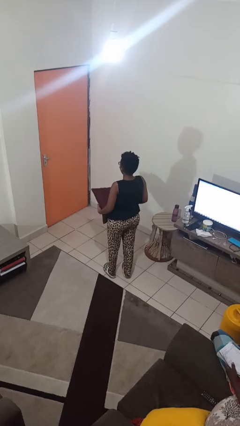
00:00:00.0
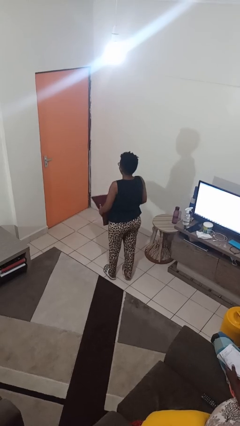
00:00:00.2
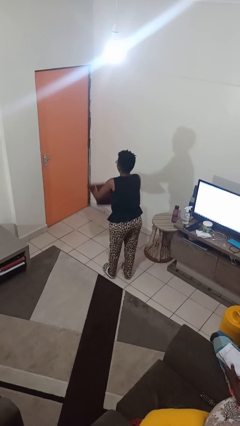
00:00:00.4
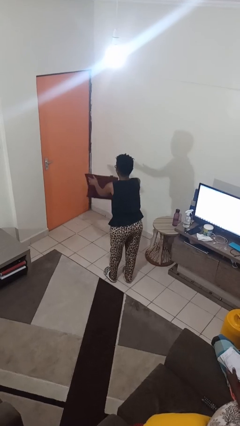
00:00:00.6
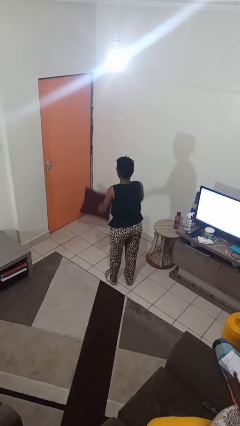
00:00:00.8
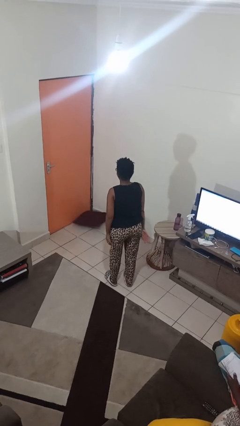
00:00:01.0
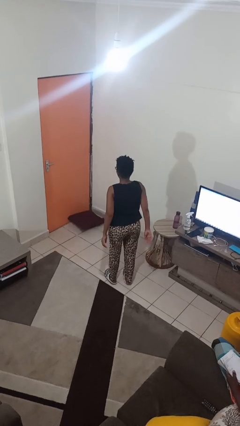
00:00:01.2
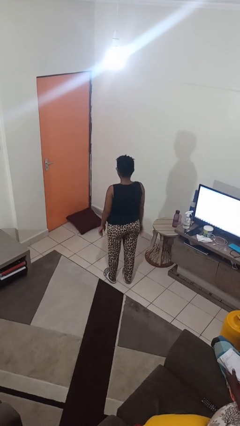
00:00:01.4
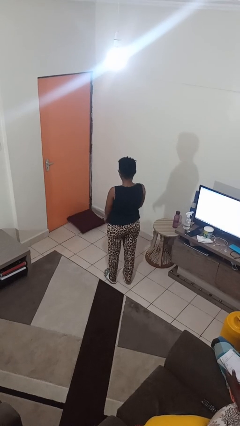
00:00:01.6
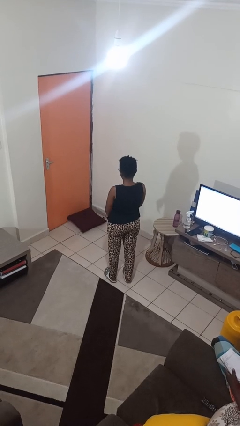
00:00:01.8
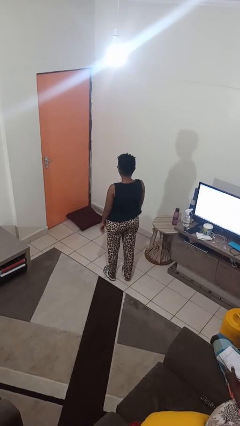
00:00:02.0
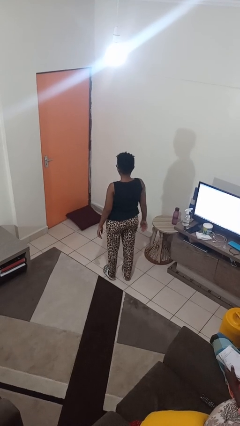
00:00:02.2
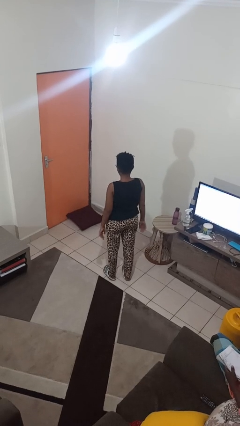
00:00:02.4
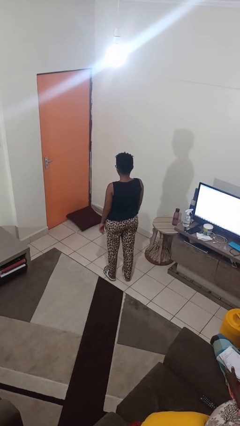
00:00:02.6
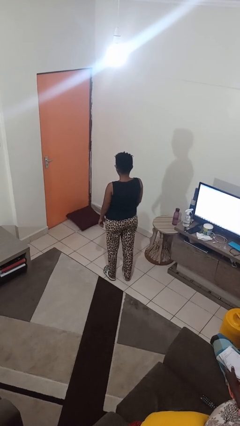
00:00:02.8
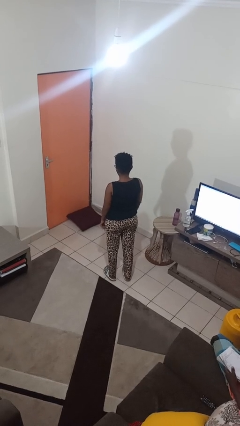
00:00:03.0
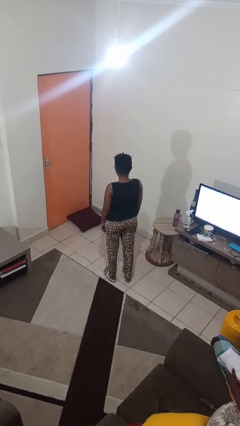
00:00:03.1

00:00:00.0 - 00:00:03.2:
person throws object to ground

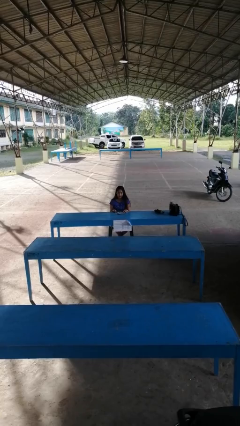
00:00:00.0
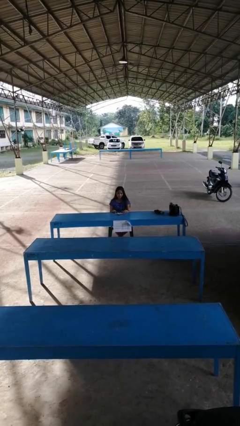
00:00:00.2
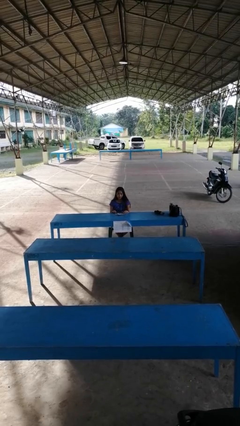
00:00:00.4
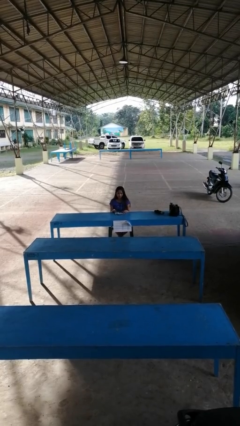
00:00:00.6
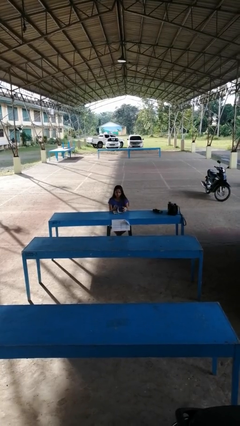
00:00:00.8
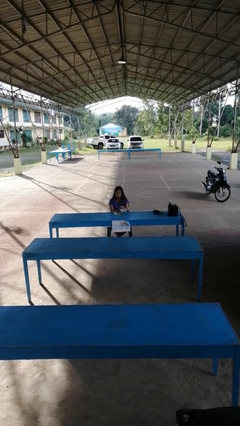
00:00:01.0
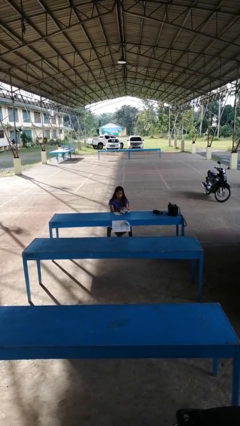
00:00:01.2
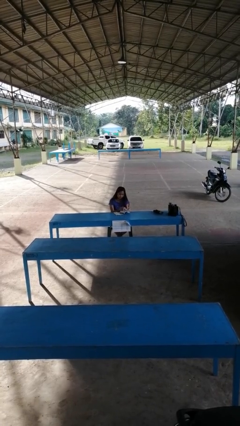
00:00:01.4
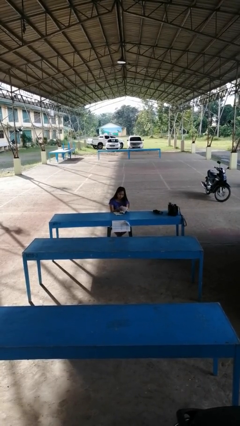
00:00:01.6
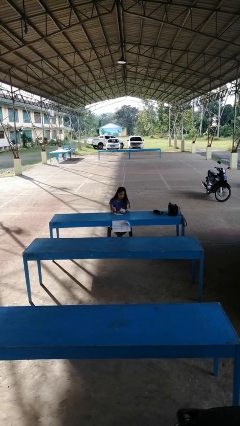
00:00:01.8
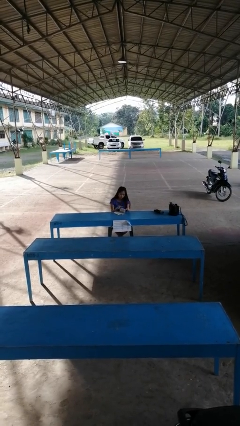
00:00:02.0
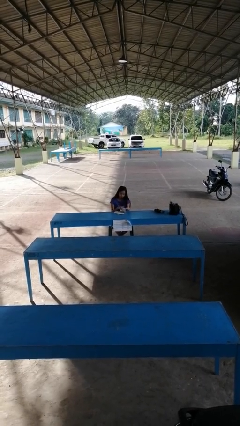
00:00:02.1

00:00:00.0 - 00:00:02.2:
person reads magazine

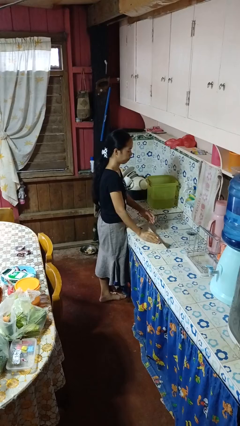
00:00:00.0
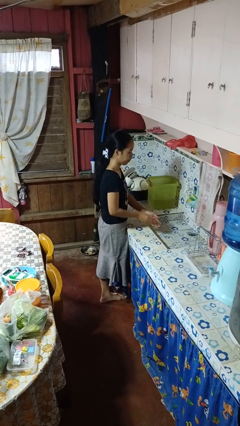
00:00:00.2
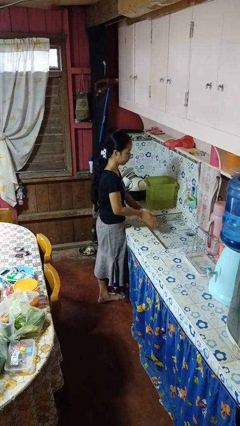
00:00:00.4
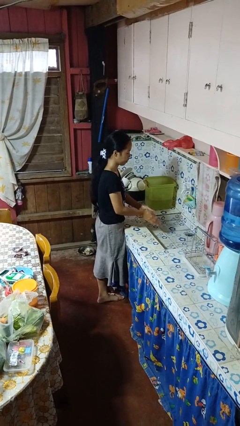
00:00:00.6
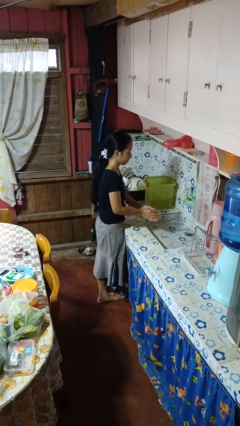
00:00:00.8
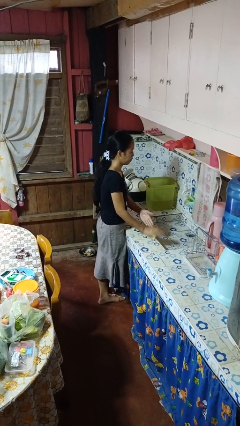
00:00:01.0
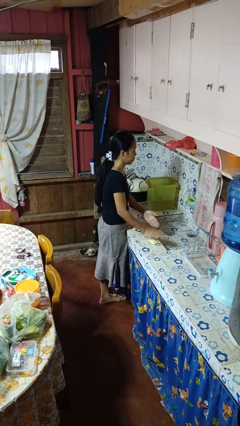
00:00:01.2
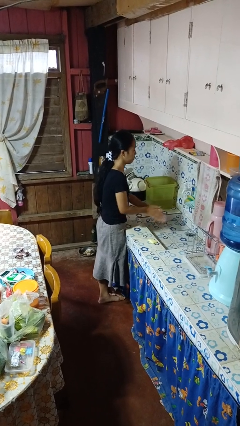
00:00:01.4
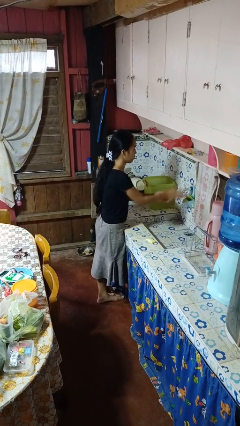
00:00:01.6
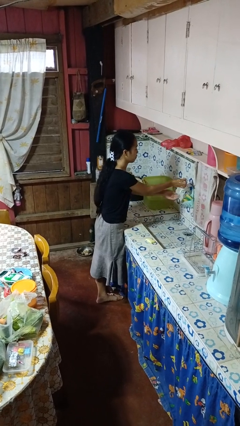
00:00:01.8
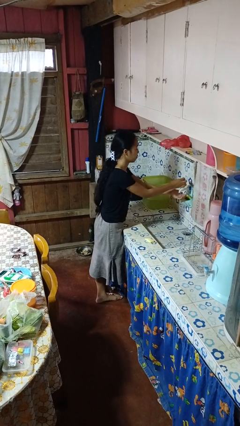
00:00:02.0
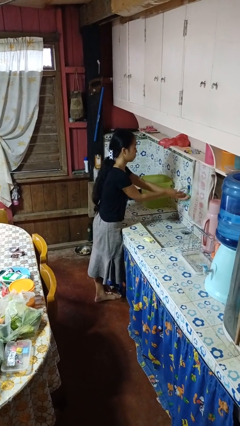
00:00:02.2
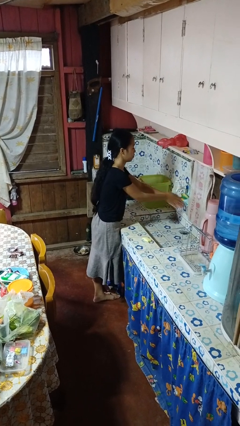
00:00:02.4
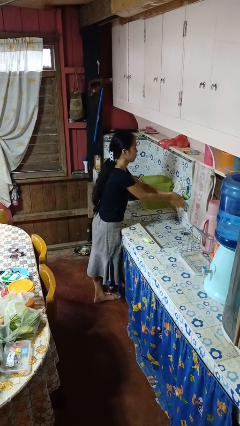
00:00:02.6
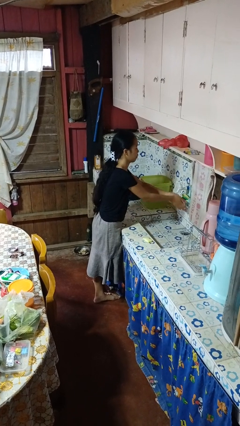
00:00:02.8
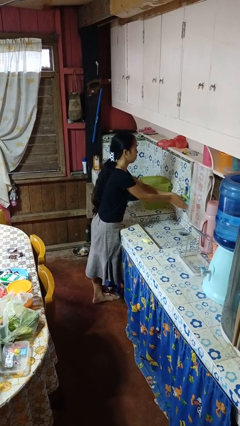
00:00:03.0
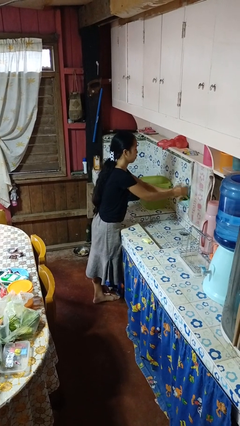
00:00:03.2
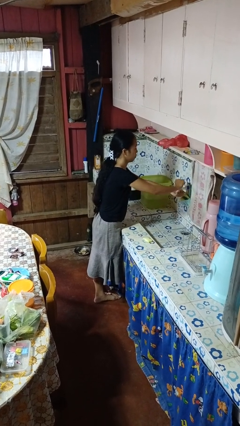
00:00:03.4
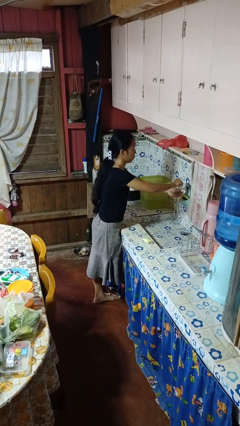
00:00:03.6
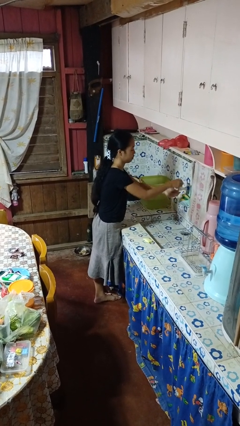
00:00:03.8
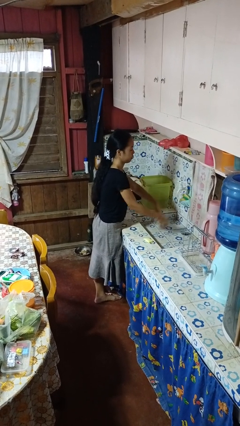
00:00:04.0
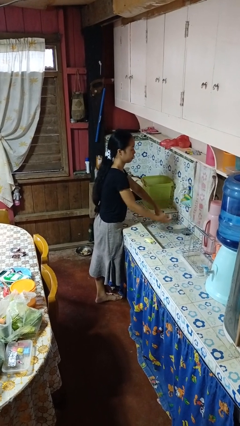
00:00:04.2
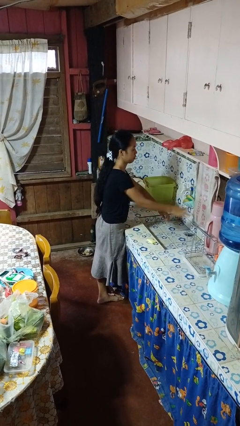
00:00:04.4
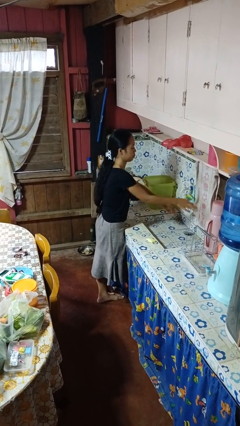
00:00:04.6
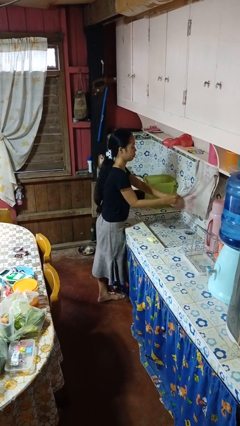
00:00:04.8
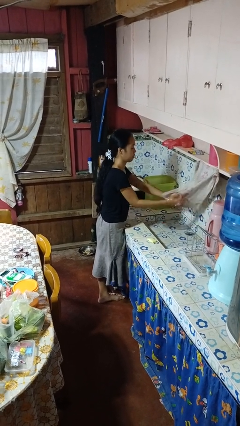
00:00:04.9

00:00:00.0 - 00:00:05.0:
person washes hands

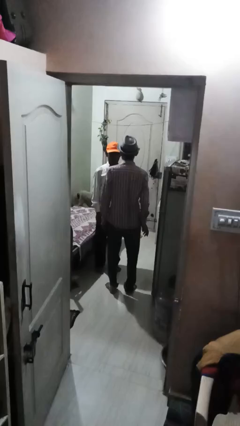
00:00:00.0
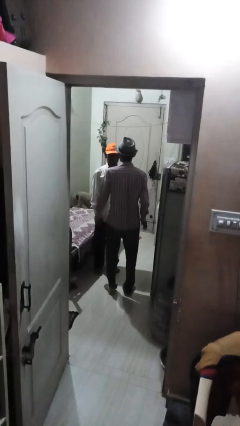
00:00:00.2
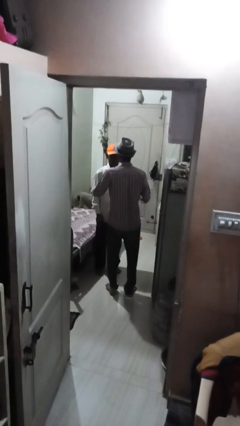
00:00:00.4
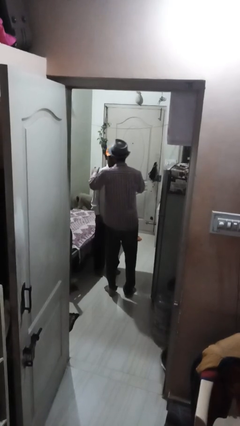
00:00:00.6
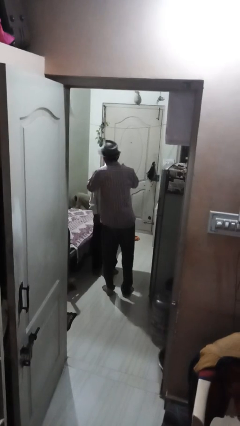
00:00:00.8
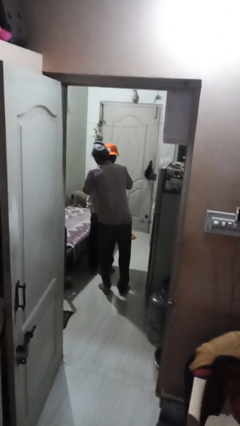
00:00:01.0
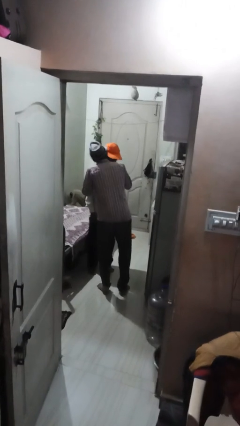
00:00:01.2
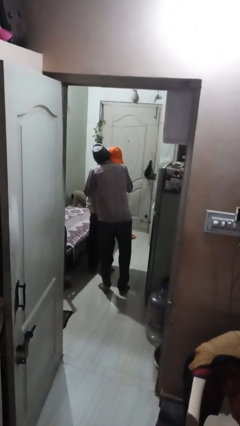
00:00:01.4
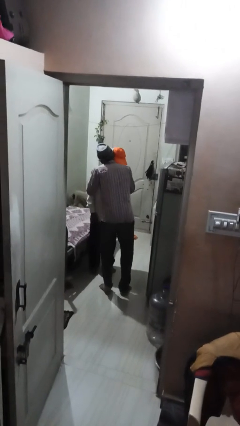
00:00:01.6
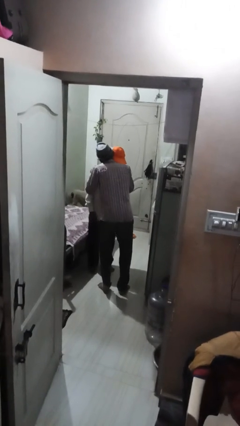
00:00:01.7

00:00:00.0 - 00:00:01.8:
person kisses cheek of person

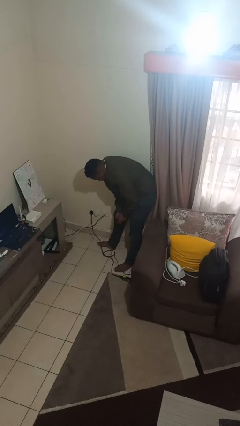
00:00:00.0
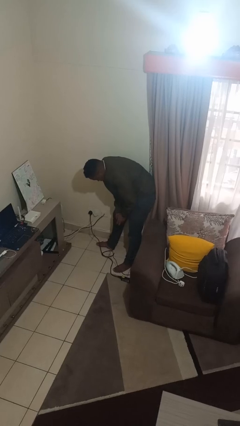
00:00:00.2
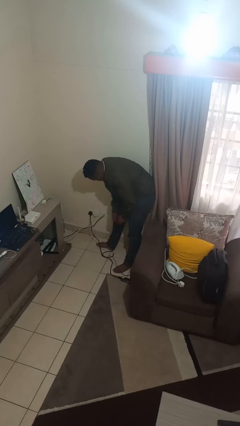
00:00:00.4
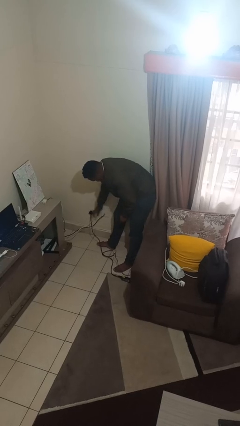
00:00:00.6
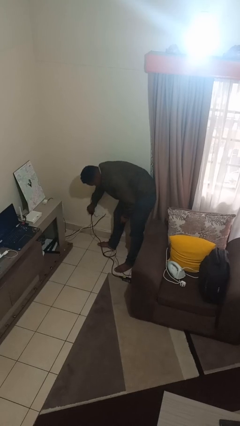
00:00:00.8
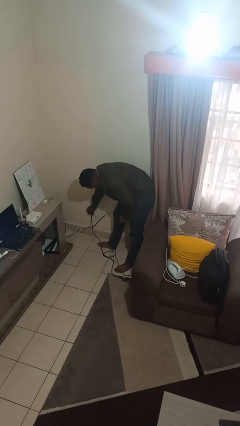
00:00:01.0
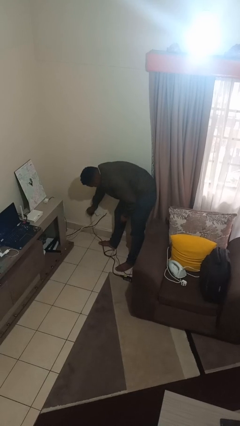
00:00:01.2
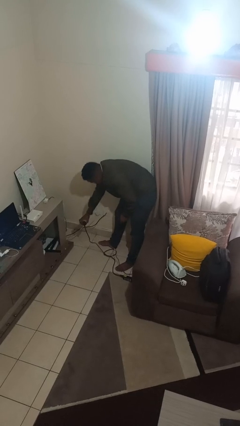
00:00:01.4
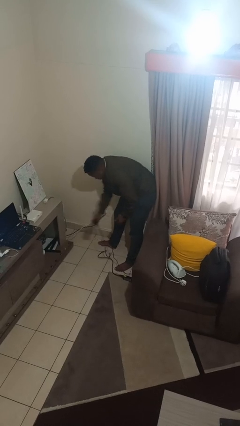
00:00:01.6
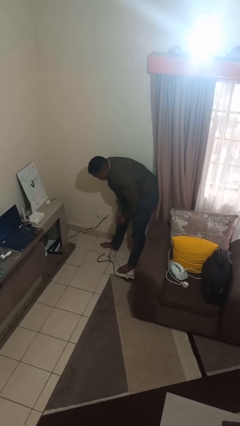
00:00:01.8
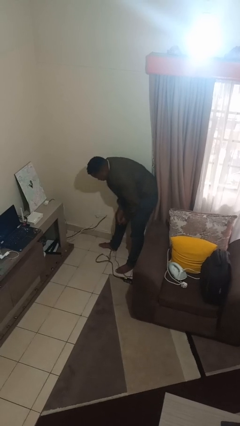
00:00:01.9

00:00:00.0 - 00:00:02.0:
person unplugs from electrical socket

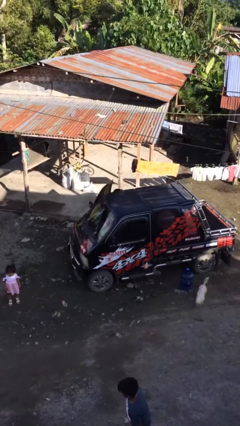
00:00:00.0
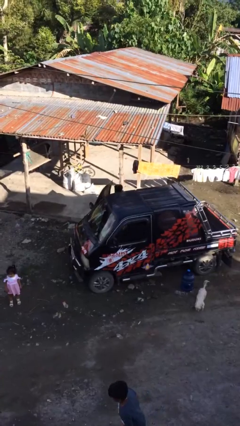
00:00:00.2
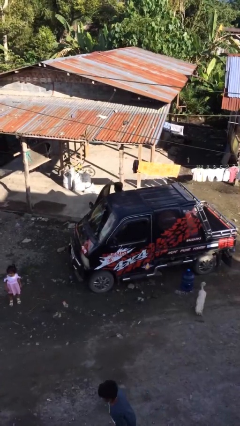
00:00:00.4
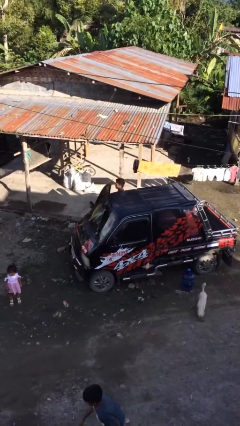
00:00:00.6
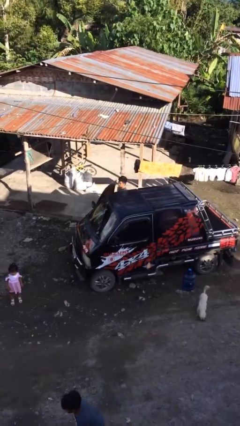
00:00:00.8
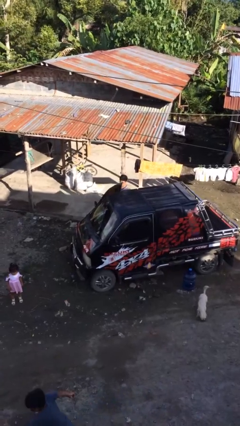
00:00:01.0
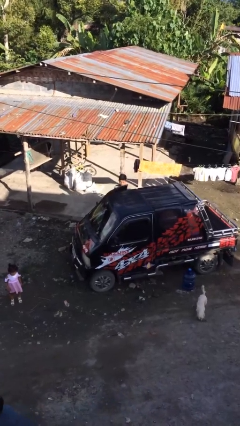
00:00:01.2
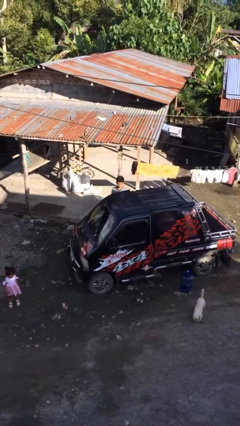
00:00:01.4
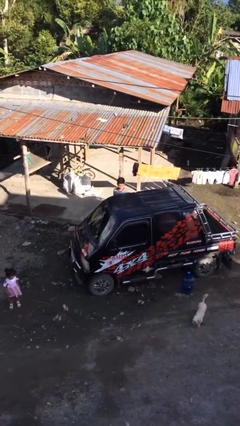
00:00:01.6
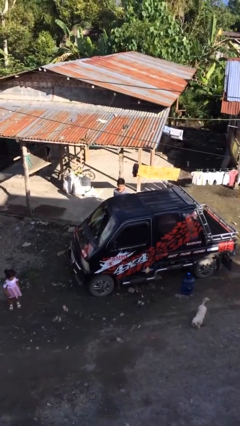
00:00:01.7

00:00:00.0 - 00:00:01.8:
person exits car

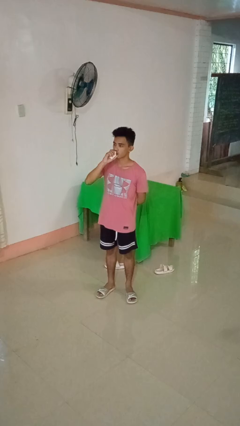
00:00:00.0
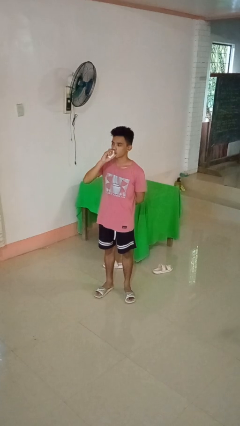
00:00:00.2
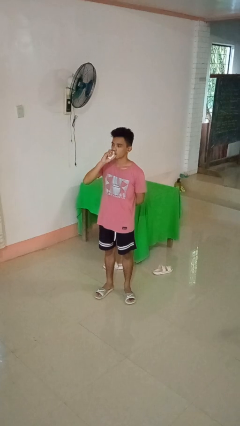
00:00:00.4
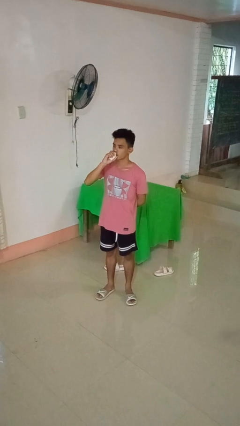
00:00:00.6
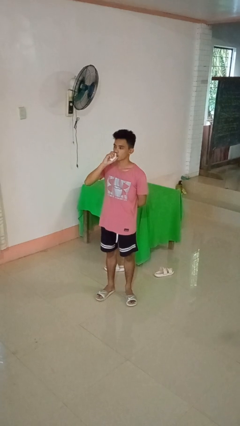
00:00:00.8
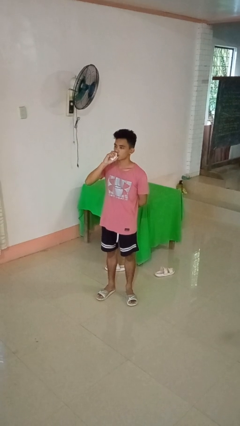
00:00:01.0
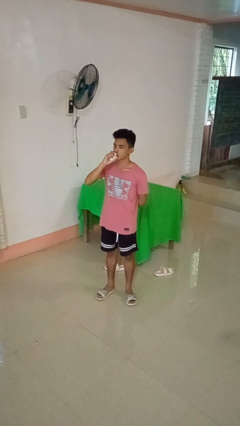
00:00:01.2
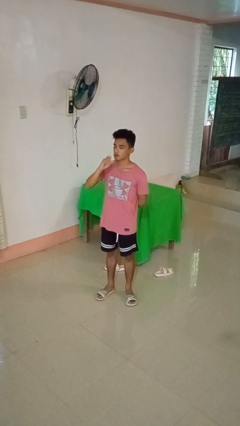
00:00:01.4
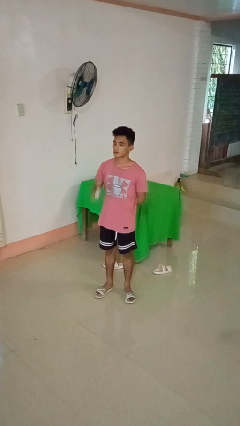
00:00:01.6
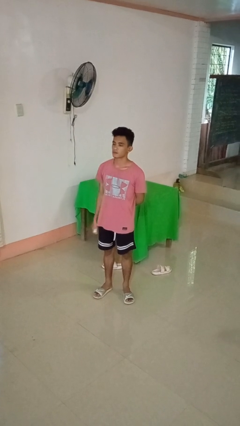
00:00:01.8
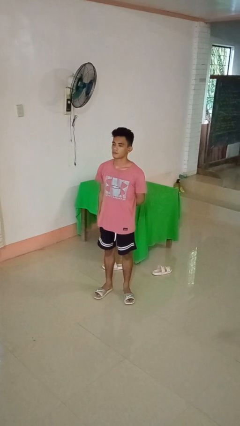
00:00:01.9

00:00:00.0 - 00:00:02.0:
person vapes
